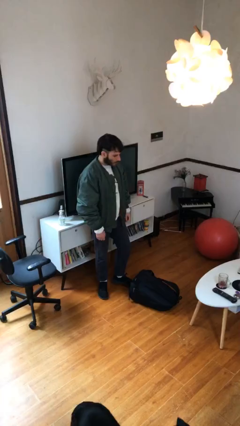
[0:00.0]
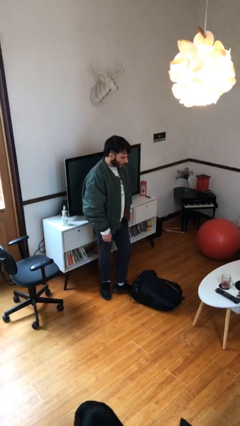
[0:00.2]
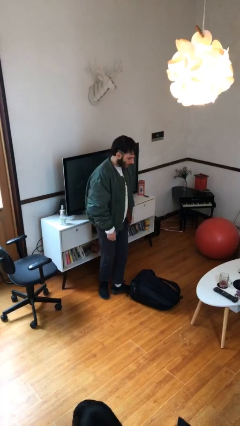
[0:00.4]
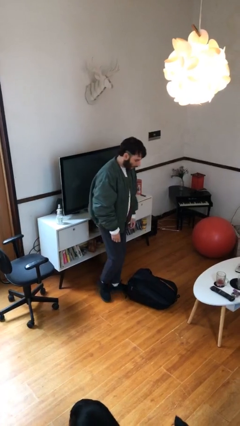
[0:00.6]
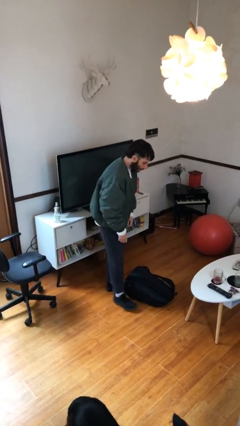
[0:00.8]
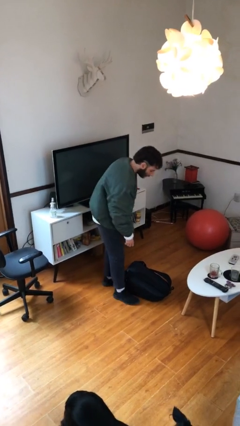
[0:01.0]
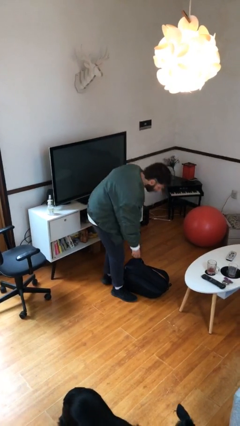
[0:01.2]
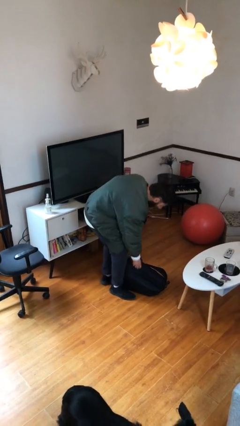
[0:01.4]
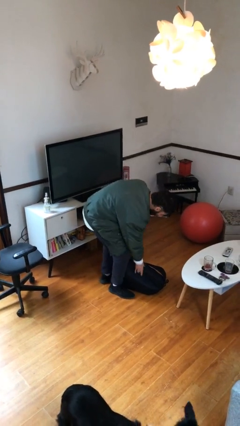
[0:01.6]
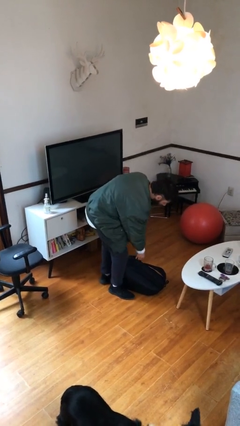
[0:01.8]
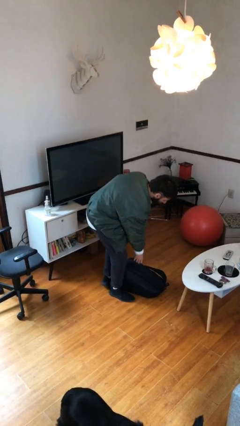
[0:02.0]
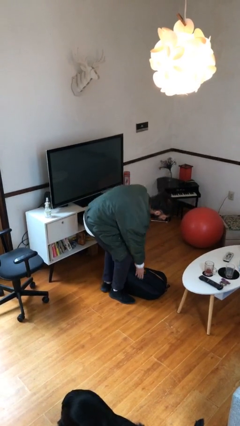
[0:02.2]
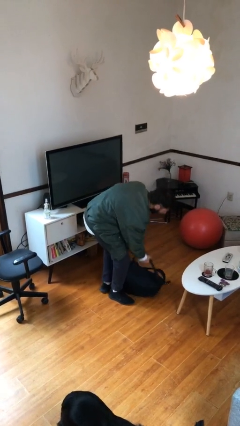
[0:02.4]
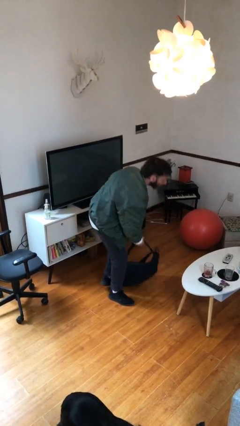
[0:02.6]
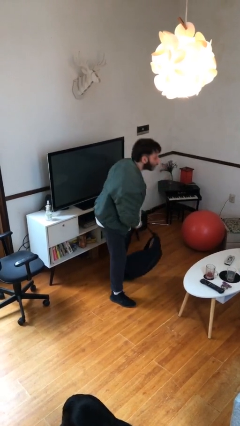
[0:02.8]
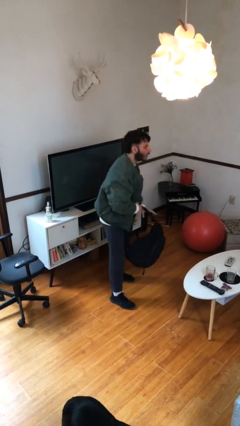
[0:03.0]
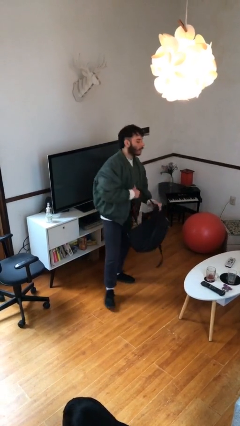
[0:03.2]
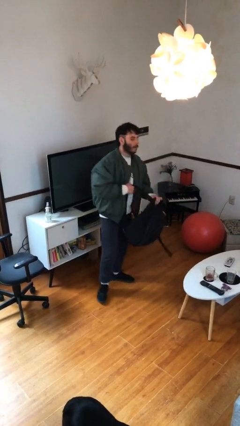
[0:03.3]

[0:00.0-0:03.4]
person picks up object from floor

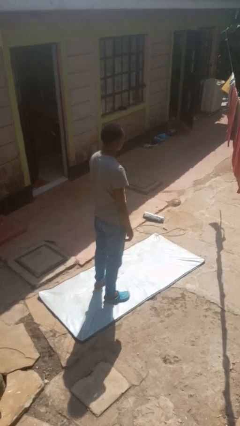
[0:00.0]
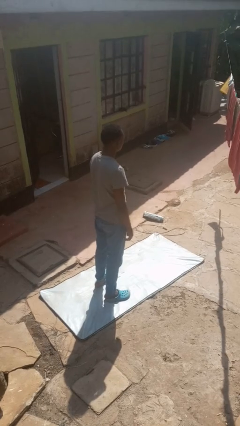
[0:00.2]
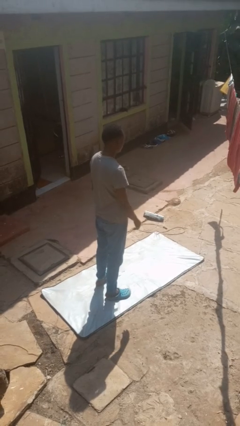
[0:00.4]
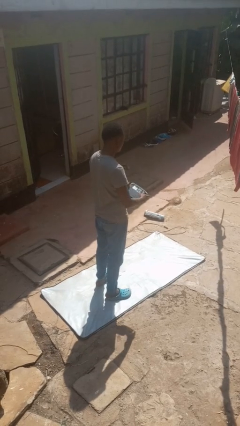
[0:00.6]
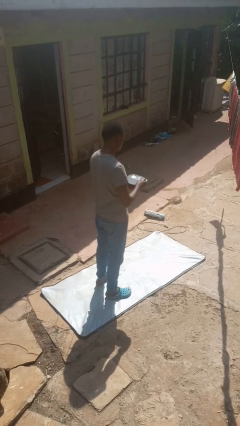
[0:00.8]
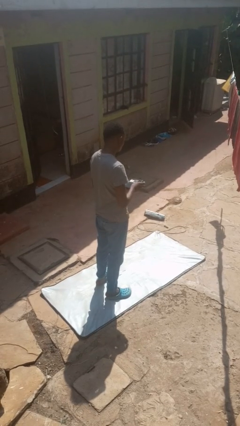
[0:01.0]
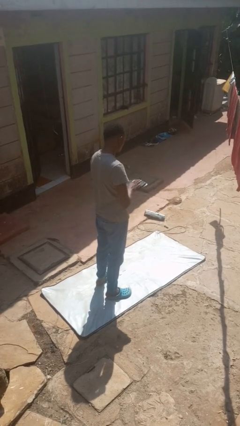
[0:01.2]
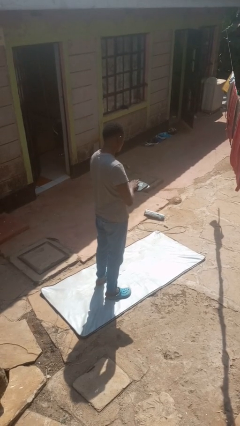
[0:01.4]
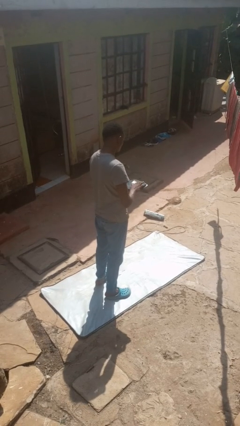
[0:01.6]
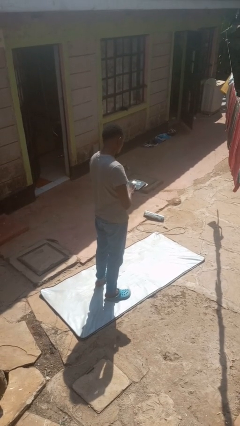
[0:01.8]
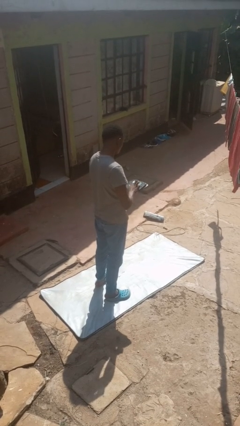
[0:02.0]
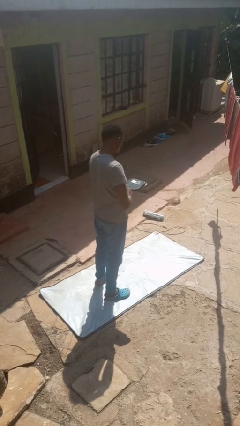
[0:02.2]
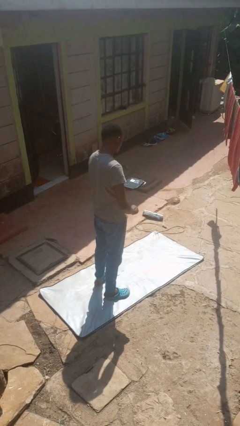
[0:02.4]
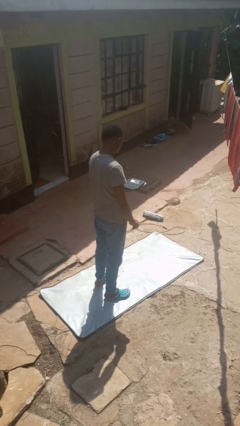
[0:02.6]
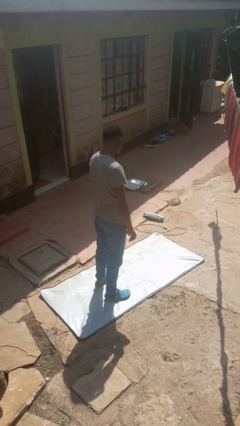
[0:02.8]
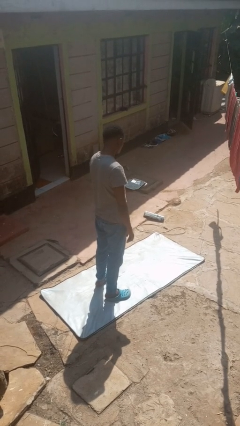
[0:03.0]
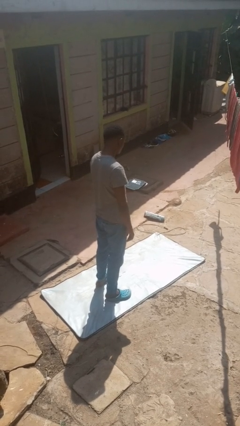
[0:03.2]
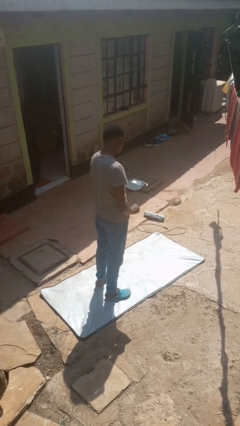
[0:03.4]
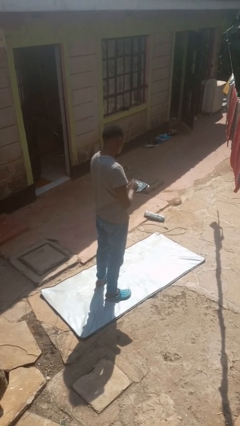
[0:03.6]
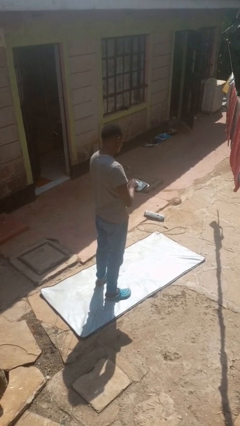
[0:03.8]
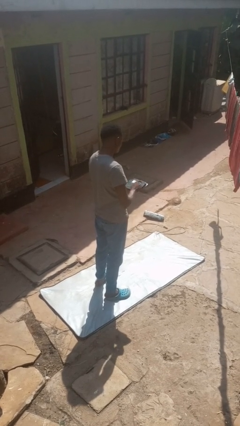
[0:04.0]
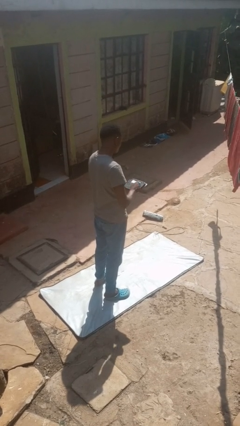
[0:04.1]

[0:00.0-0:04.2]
person interacts with tablet

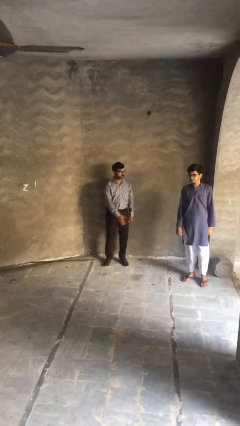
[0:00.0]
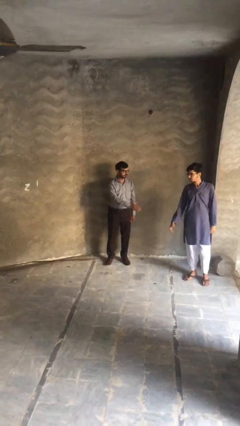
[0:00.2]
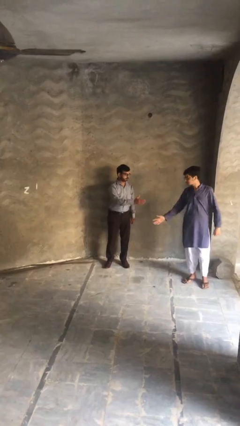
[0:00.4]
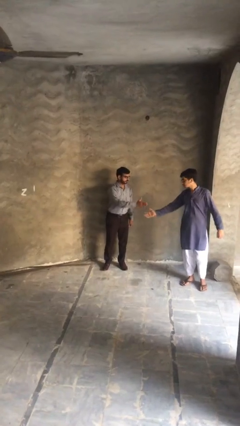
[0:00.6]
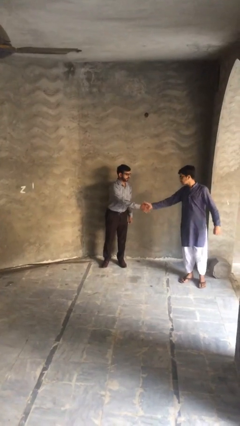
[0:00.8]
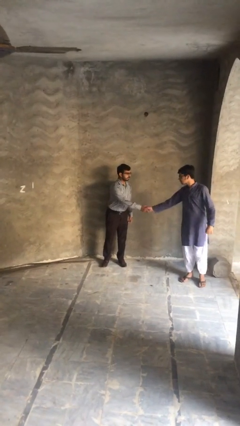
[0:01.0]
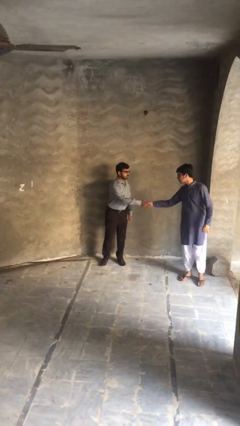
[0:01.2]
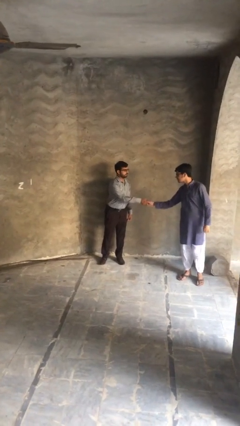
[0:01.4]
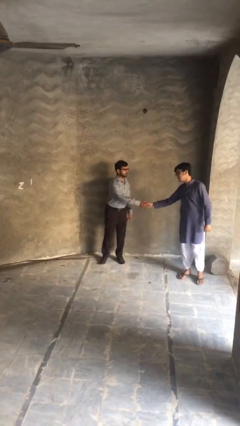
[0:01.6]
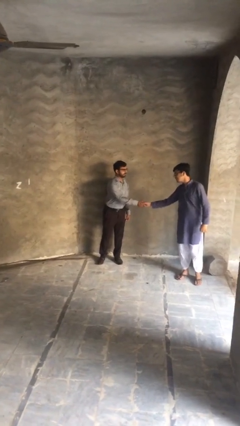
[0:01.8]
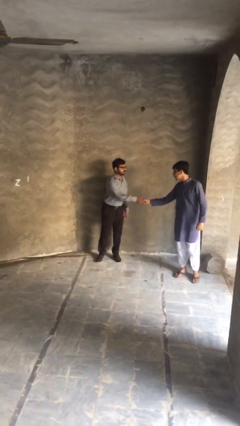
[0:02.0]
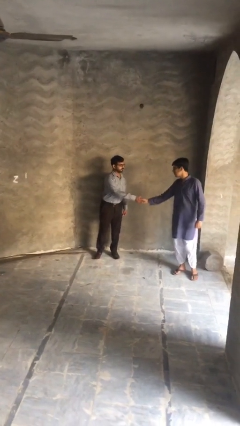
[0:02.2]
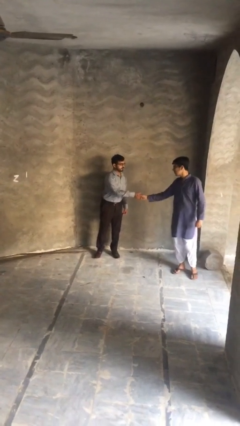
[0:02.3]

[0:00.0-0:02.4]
person shakes hand

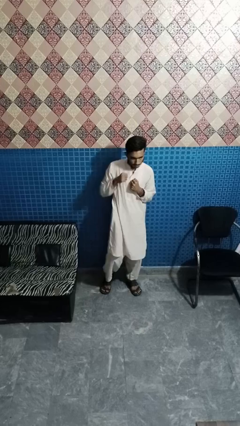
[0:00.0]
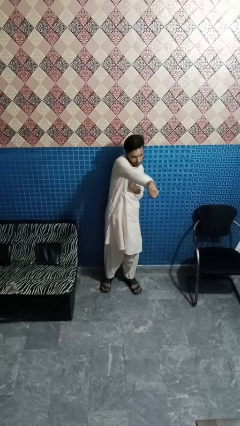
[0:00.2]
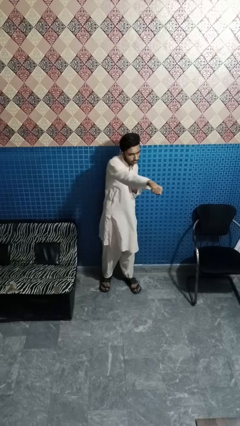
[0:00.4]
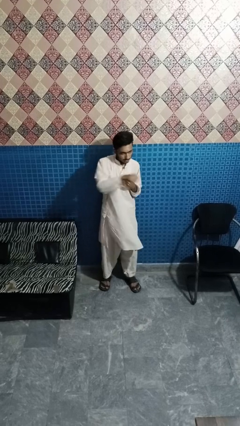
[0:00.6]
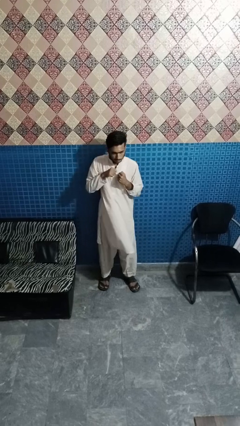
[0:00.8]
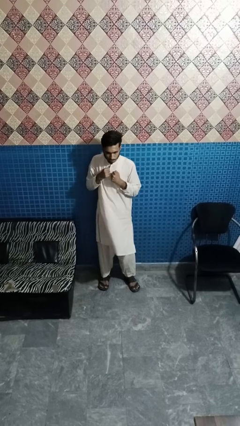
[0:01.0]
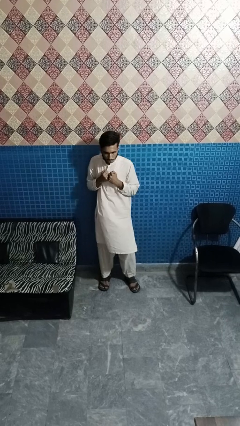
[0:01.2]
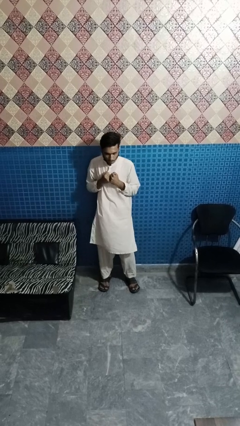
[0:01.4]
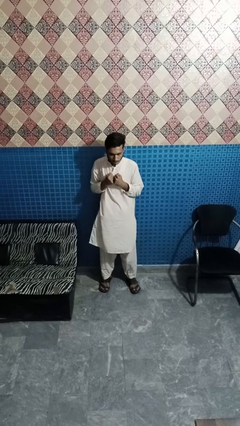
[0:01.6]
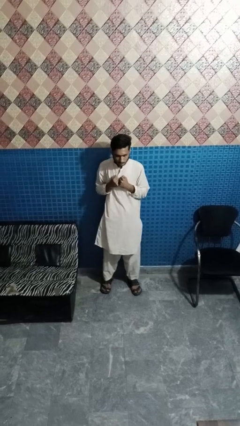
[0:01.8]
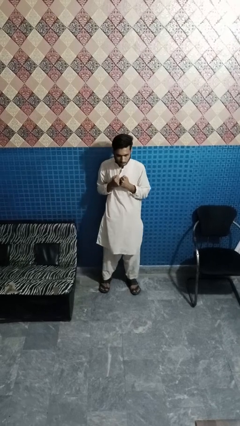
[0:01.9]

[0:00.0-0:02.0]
person punches

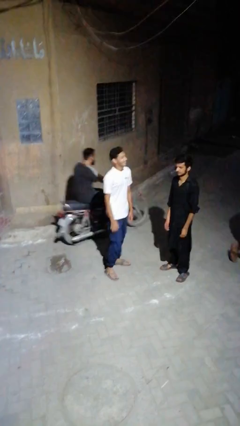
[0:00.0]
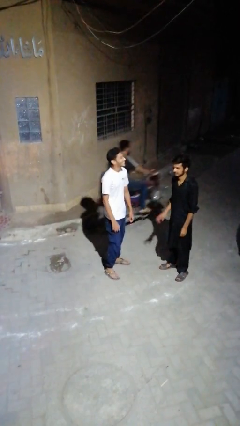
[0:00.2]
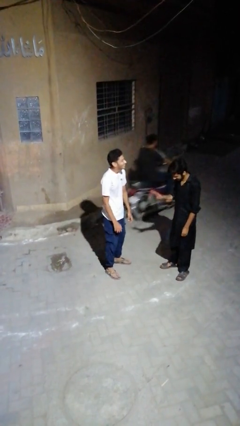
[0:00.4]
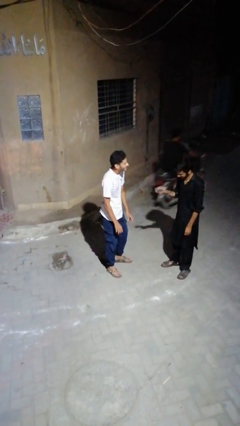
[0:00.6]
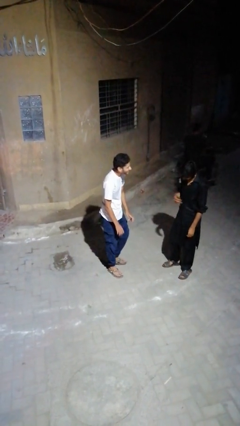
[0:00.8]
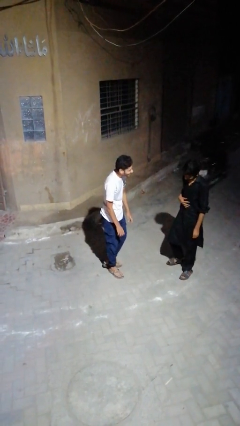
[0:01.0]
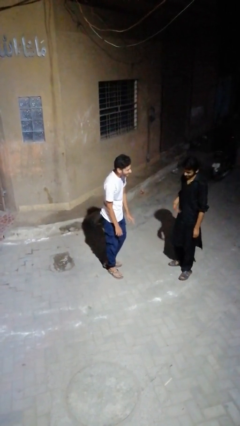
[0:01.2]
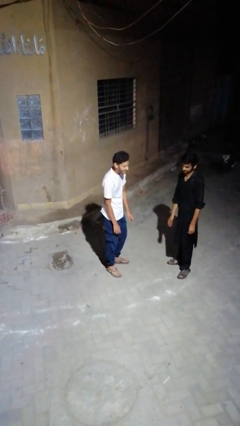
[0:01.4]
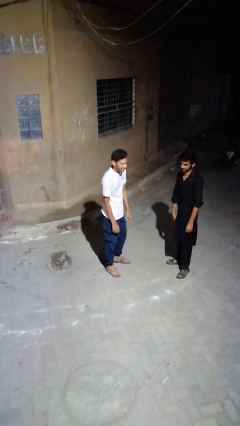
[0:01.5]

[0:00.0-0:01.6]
person laughs with person

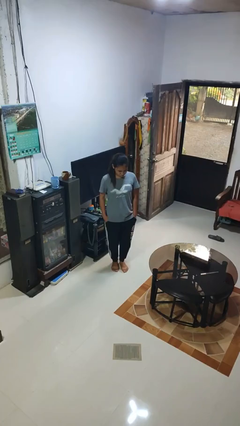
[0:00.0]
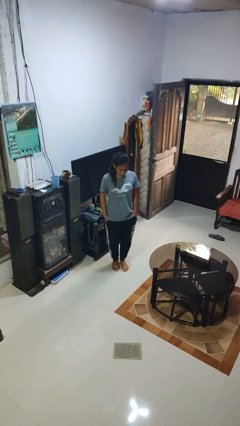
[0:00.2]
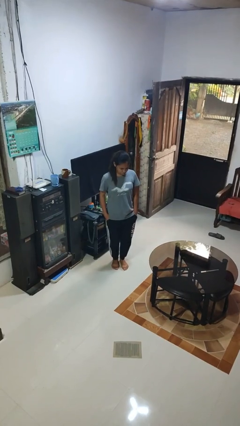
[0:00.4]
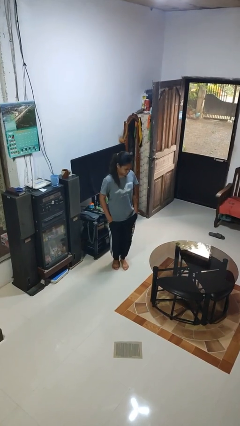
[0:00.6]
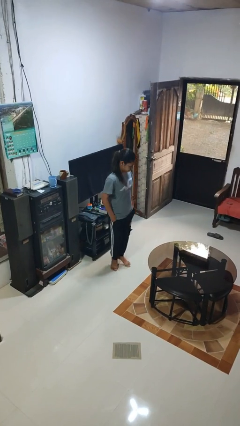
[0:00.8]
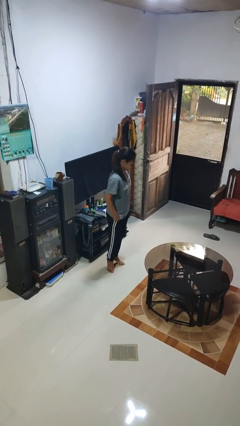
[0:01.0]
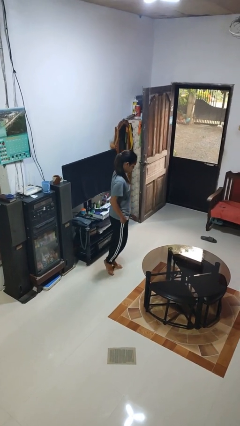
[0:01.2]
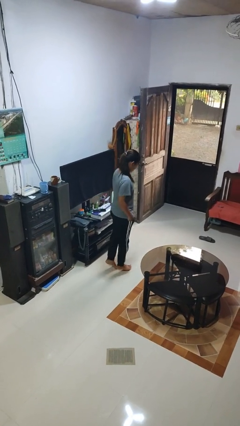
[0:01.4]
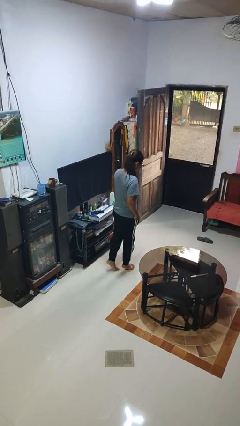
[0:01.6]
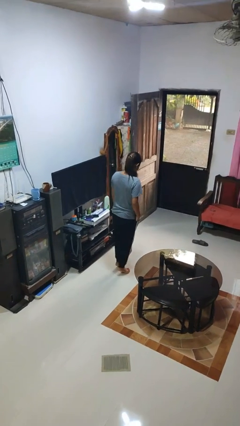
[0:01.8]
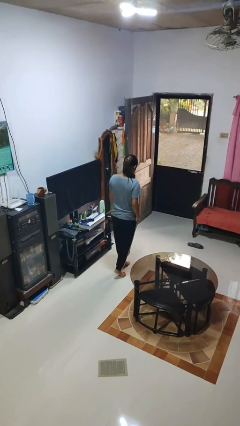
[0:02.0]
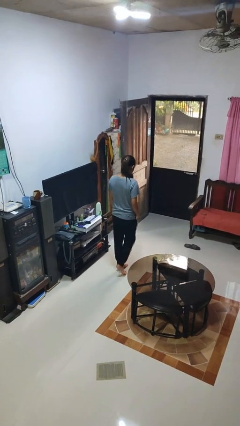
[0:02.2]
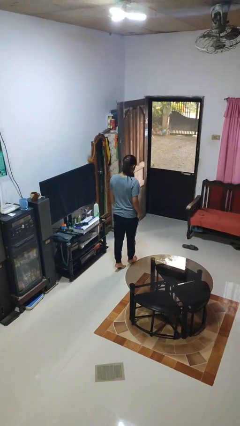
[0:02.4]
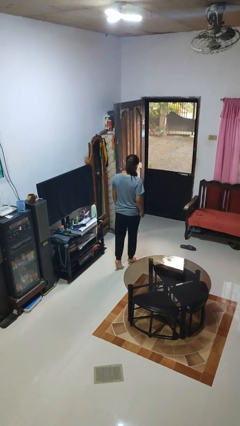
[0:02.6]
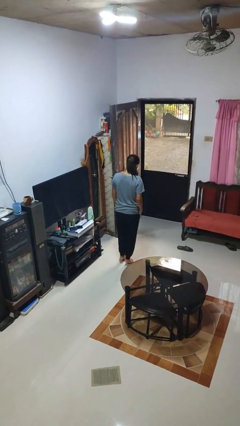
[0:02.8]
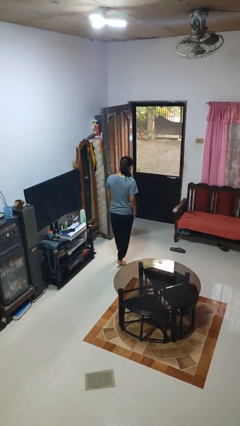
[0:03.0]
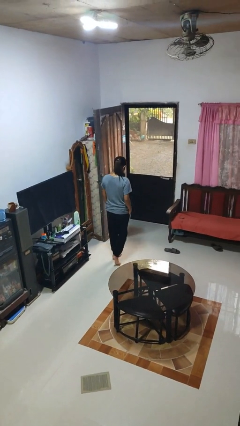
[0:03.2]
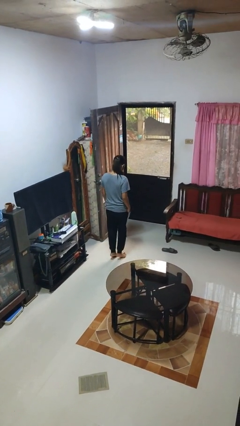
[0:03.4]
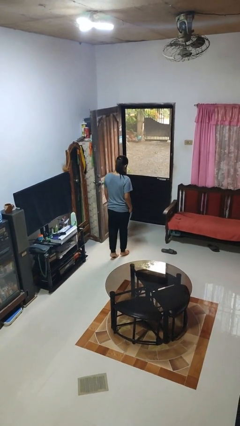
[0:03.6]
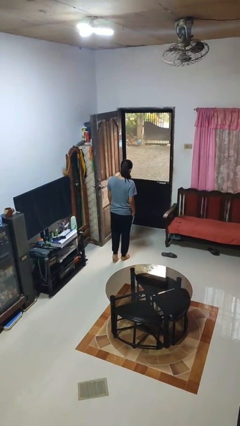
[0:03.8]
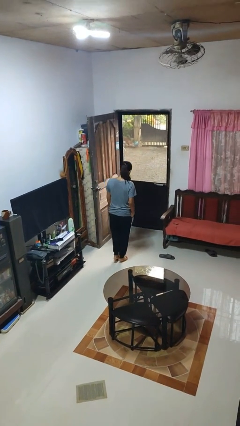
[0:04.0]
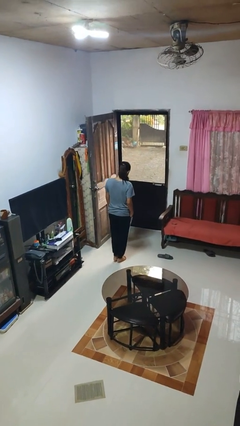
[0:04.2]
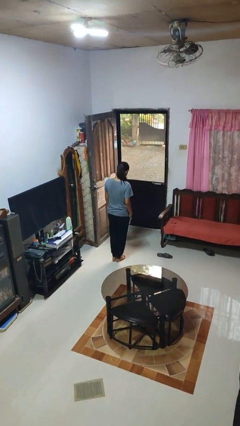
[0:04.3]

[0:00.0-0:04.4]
person walks tiptoe
